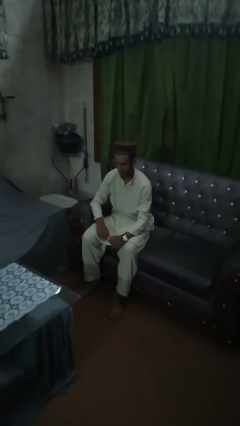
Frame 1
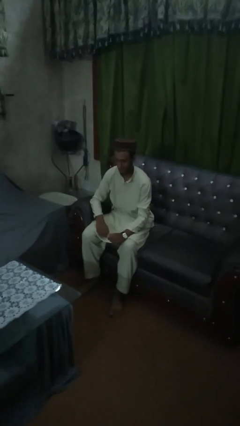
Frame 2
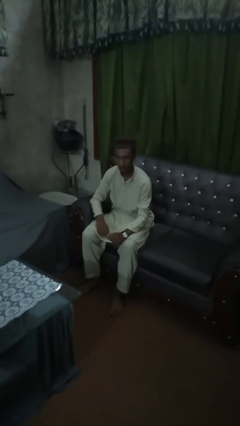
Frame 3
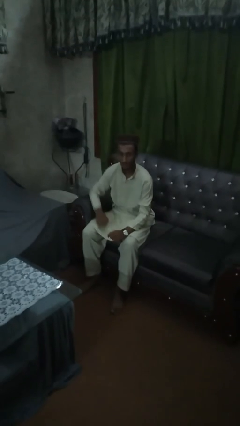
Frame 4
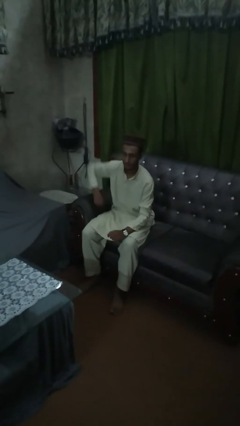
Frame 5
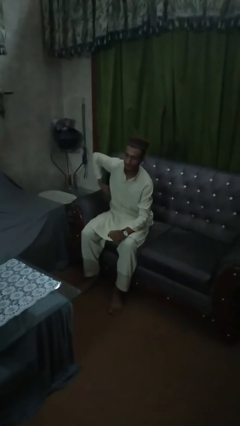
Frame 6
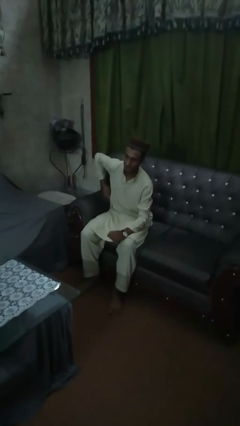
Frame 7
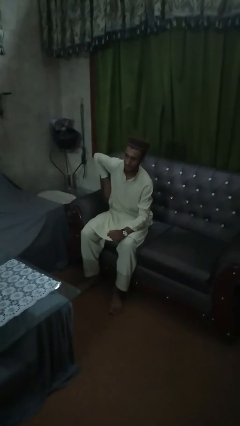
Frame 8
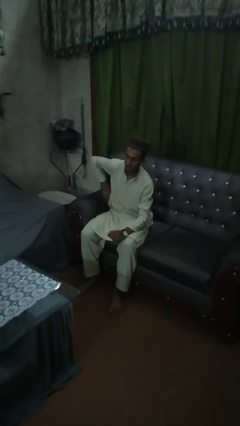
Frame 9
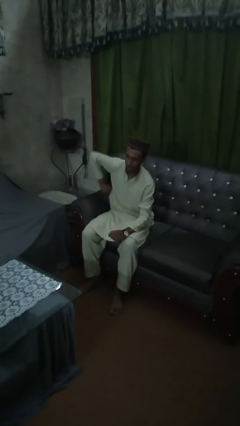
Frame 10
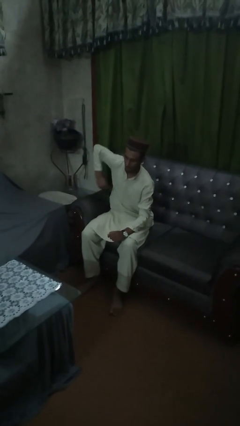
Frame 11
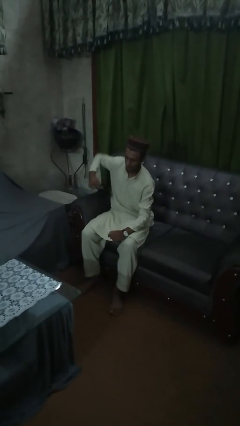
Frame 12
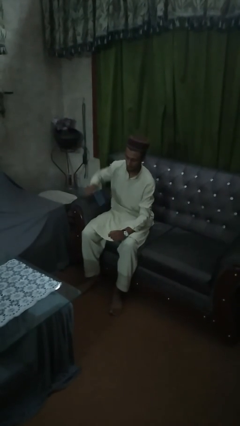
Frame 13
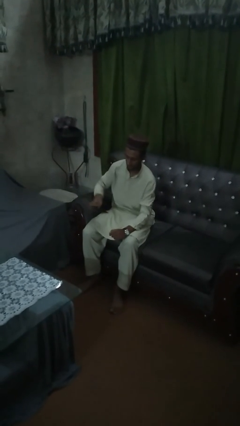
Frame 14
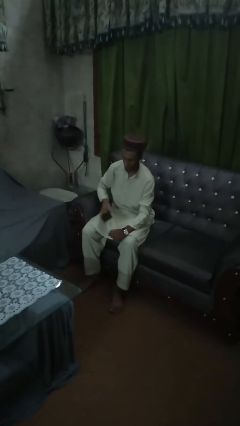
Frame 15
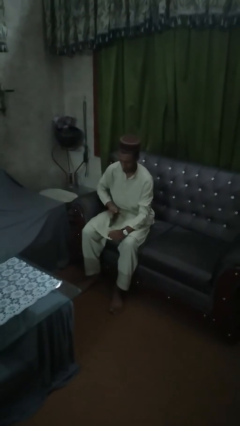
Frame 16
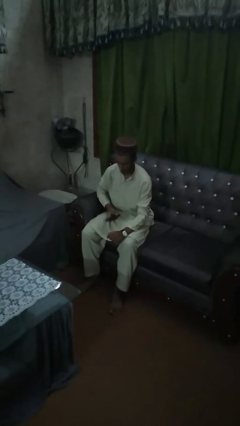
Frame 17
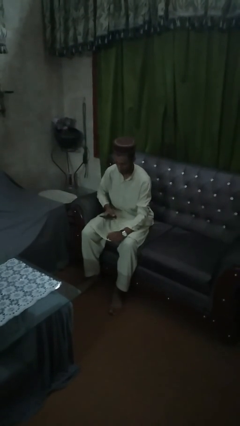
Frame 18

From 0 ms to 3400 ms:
person takes phone from pocket

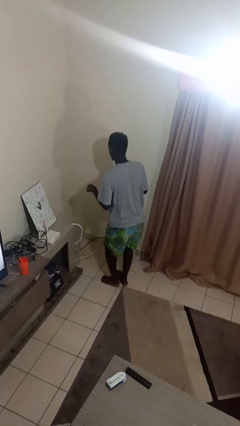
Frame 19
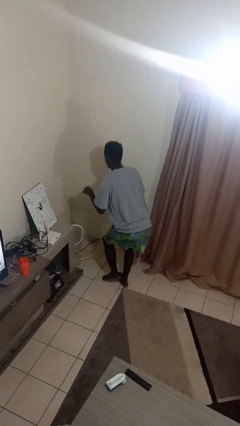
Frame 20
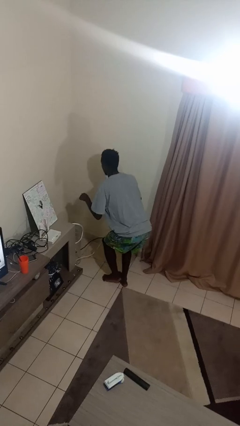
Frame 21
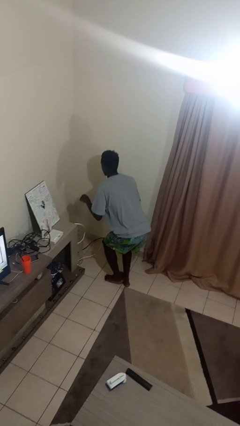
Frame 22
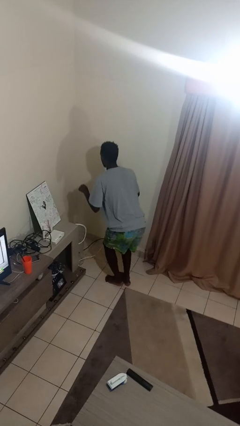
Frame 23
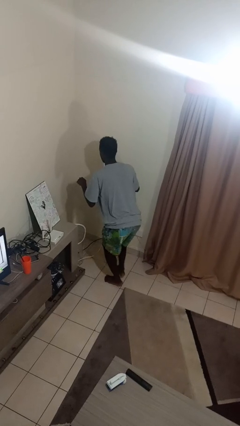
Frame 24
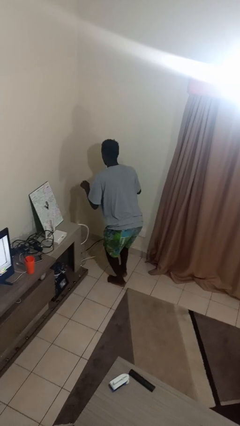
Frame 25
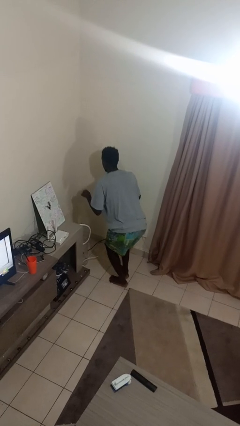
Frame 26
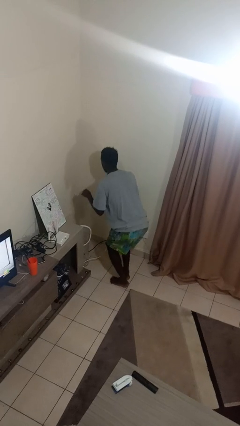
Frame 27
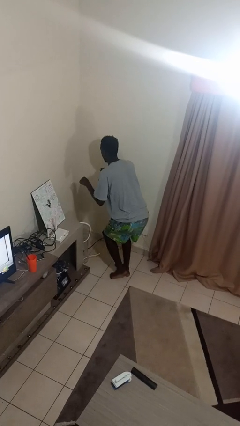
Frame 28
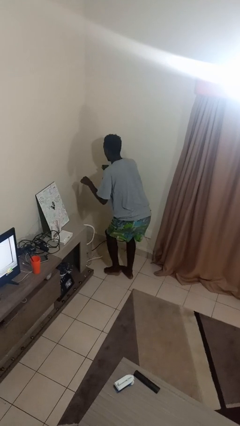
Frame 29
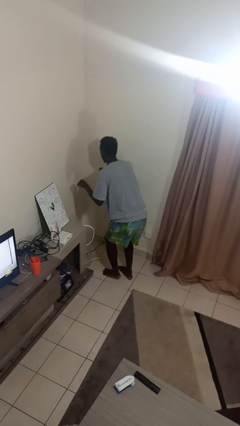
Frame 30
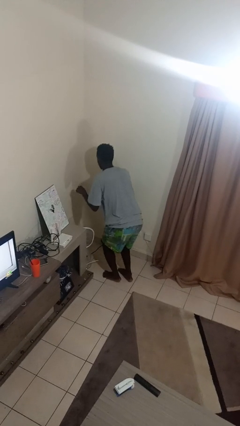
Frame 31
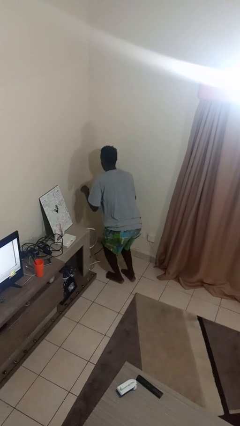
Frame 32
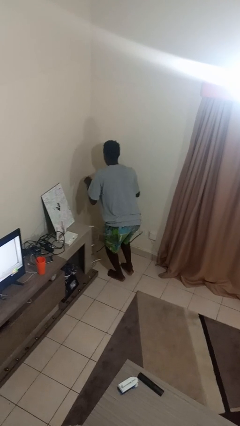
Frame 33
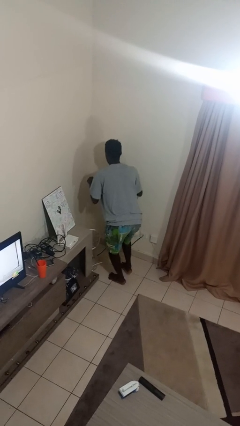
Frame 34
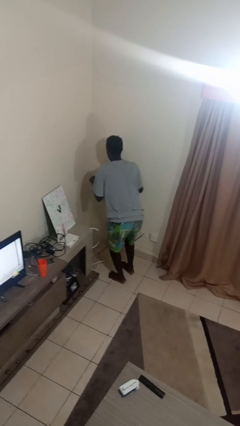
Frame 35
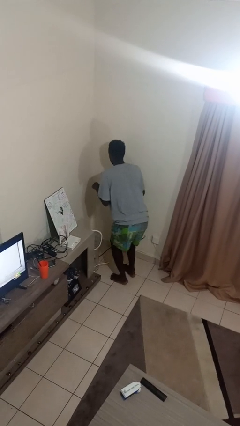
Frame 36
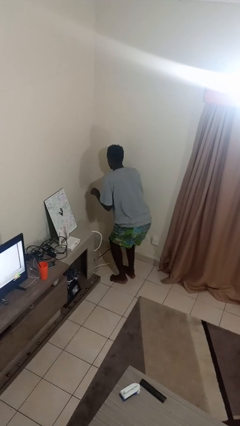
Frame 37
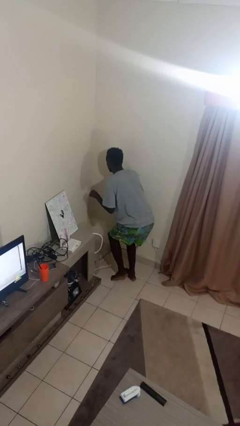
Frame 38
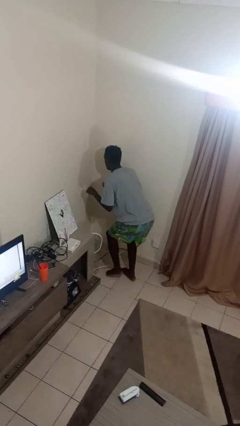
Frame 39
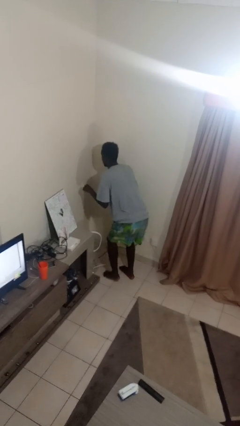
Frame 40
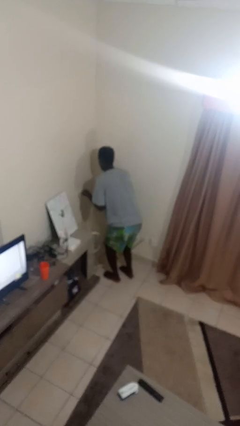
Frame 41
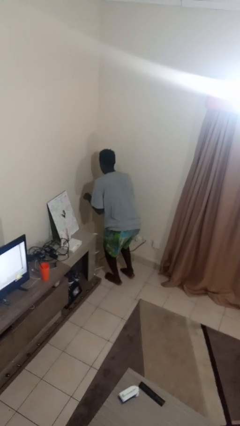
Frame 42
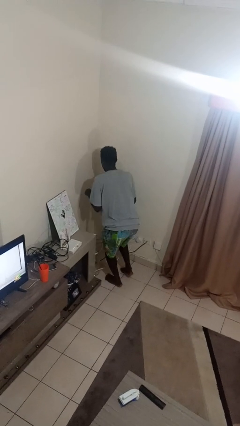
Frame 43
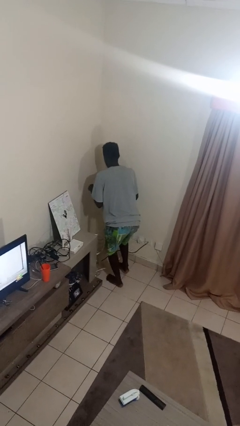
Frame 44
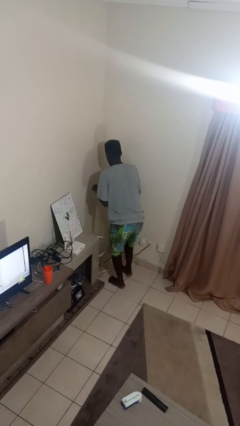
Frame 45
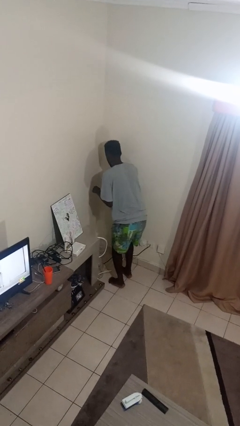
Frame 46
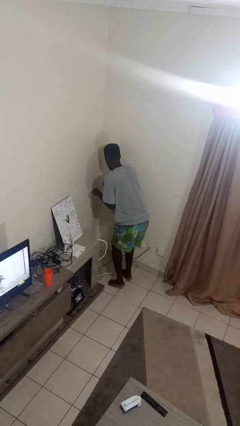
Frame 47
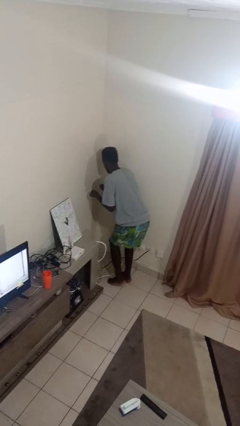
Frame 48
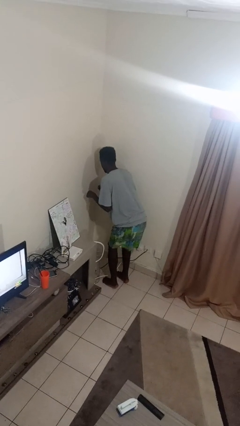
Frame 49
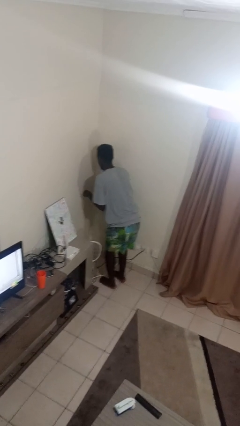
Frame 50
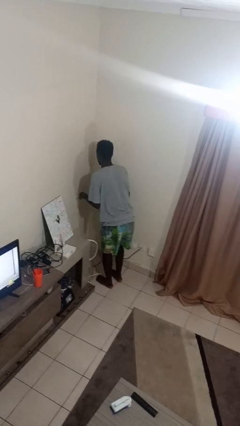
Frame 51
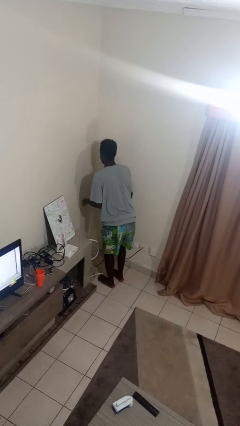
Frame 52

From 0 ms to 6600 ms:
person walks tiptoe

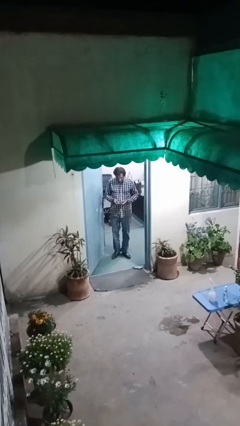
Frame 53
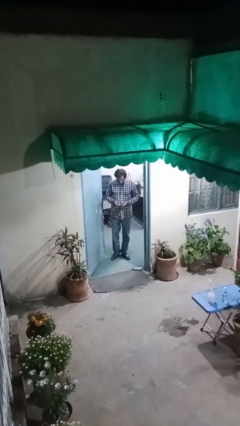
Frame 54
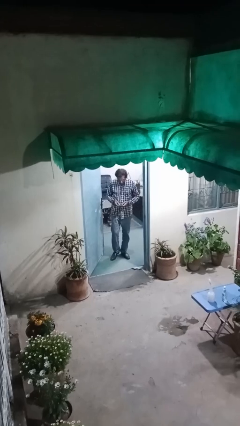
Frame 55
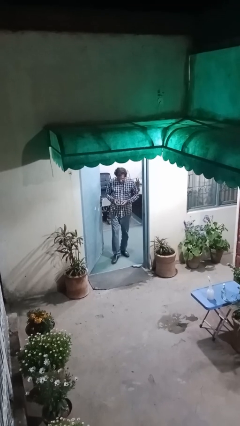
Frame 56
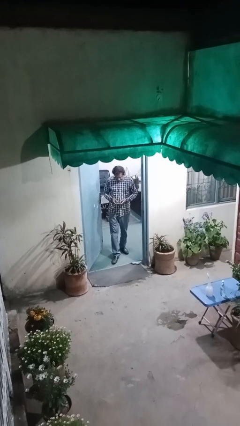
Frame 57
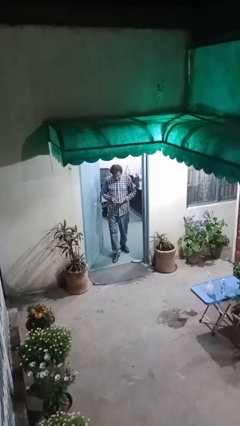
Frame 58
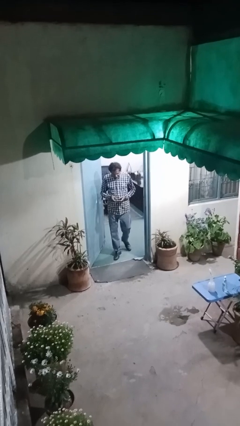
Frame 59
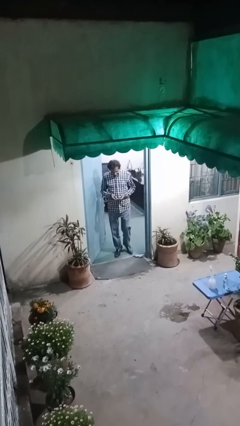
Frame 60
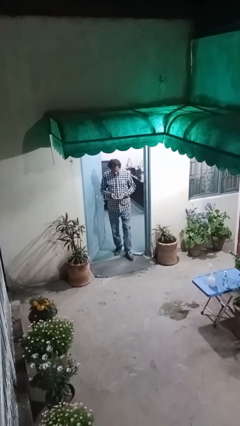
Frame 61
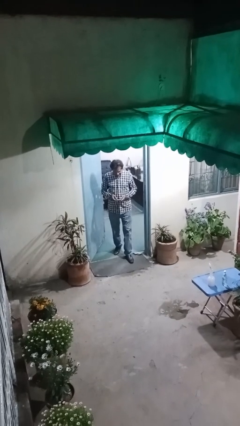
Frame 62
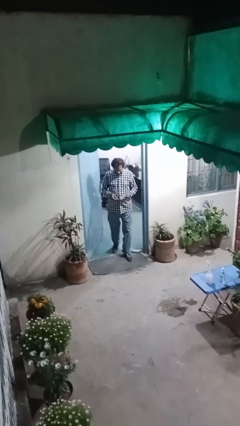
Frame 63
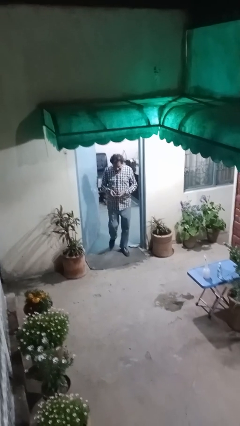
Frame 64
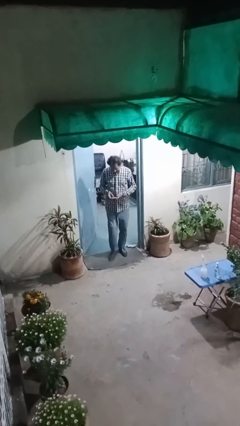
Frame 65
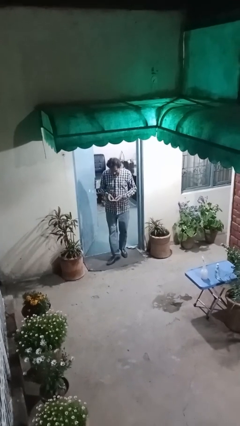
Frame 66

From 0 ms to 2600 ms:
person enters scene through structure

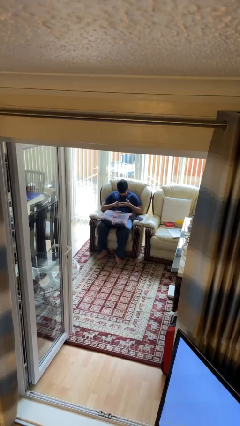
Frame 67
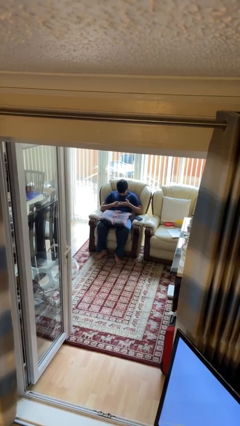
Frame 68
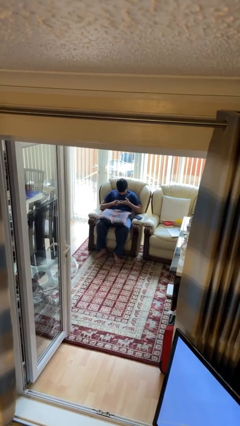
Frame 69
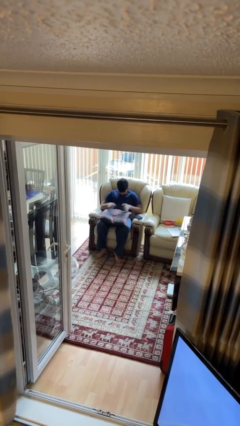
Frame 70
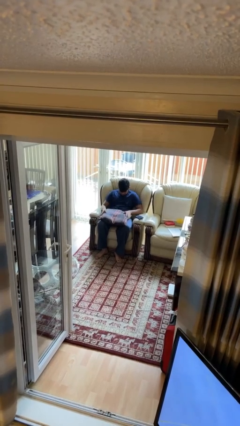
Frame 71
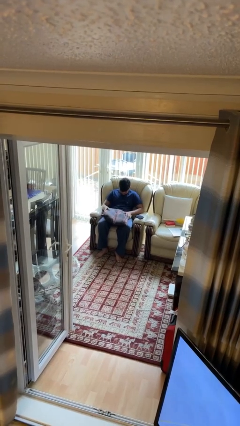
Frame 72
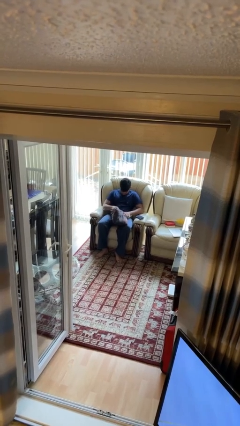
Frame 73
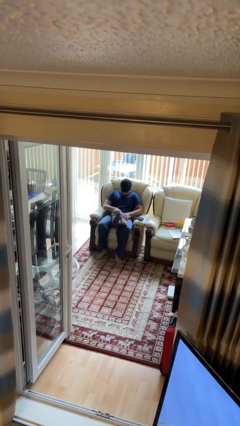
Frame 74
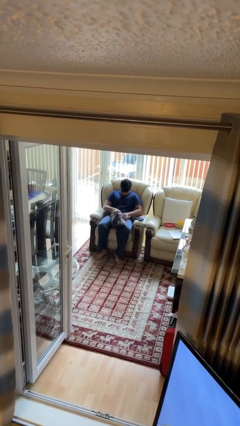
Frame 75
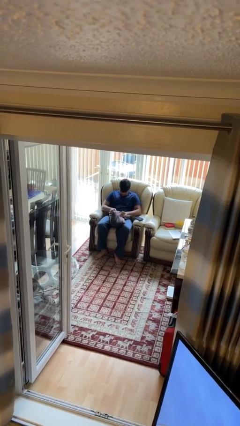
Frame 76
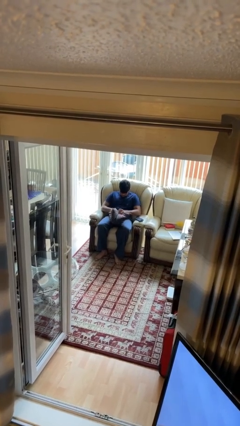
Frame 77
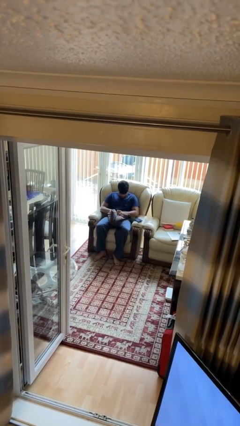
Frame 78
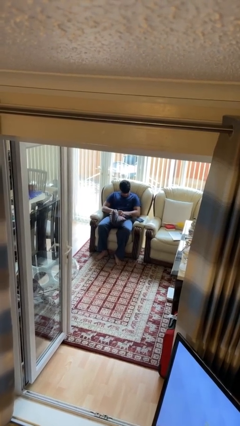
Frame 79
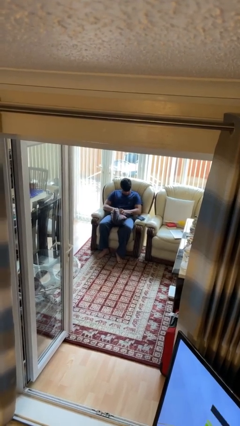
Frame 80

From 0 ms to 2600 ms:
person squeezes object

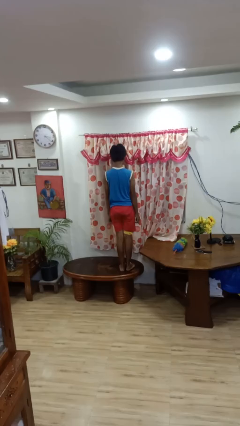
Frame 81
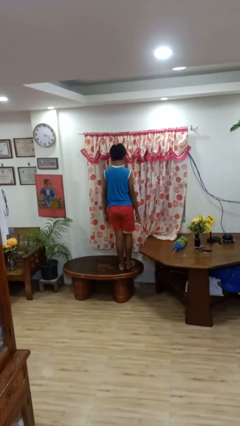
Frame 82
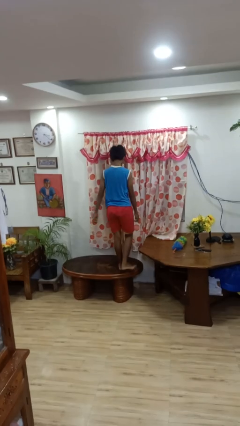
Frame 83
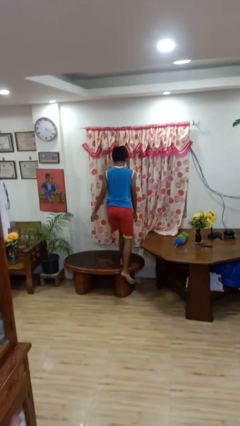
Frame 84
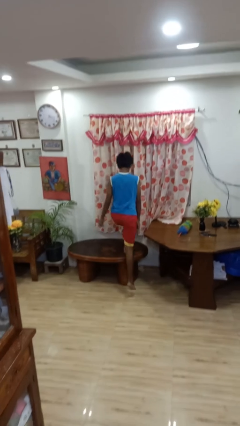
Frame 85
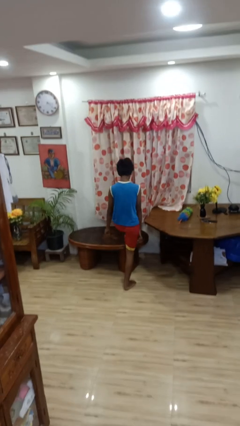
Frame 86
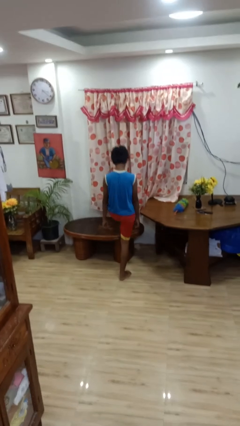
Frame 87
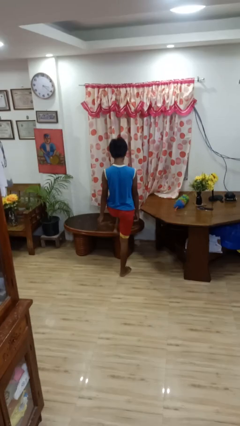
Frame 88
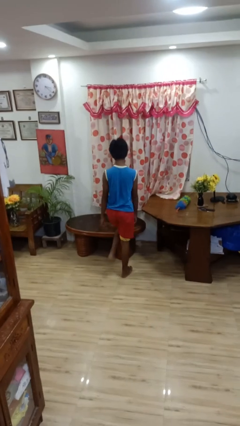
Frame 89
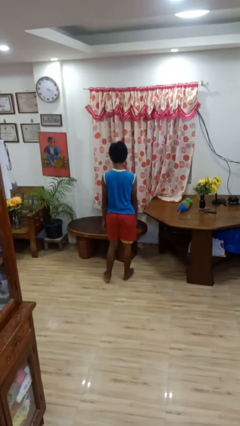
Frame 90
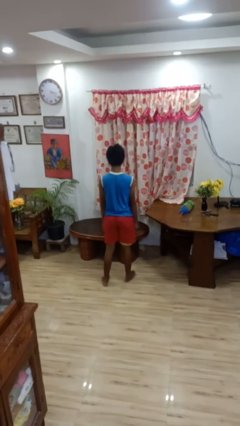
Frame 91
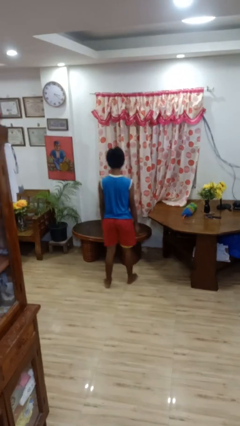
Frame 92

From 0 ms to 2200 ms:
person climbs off table
